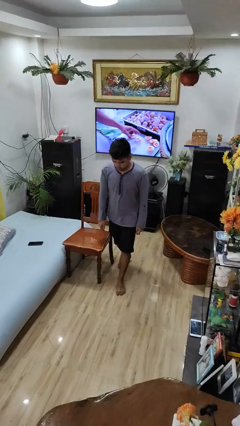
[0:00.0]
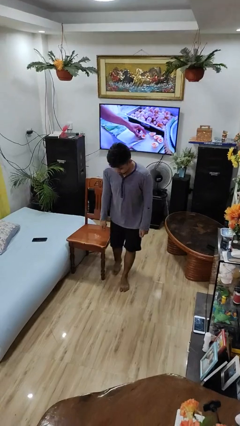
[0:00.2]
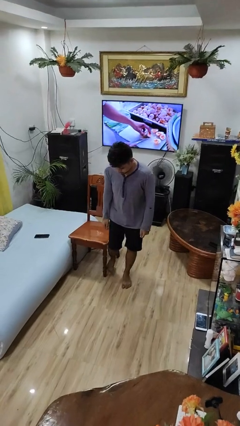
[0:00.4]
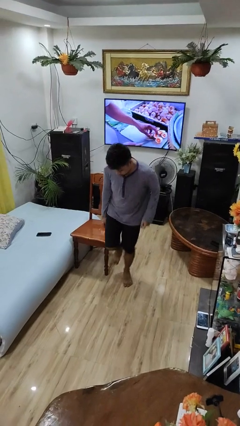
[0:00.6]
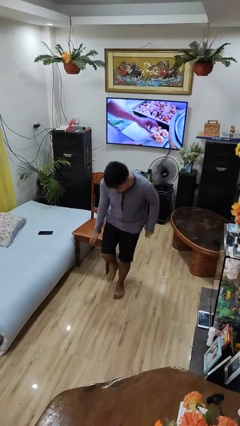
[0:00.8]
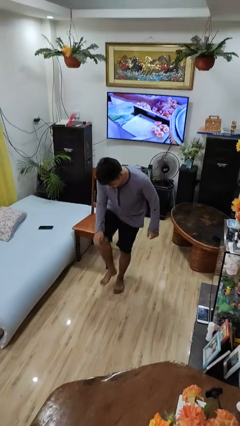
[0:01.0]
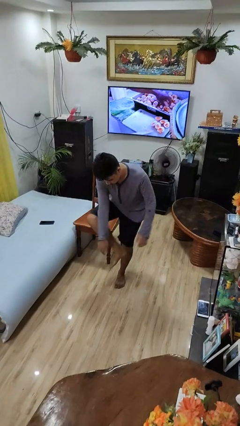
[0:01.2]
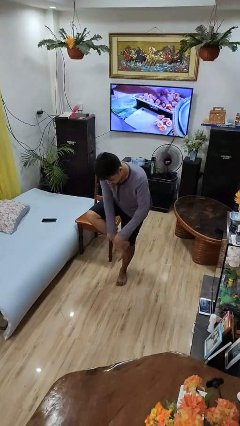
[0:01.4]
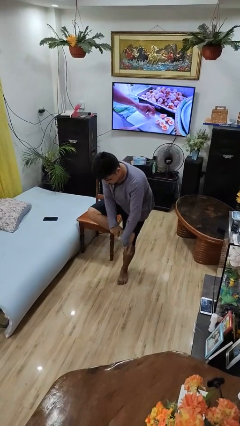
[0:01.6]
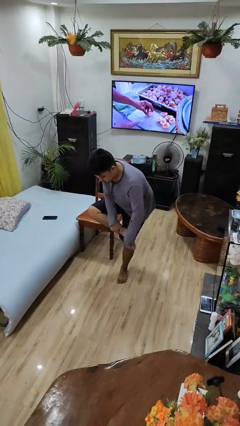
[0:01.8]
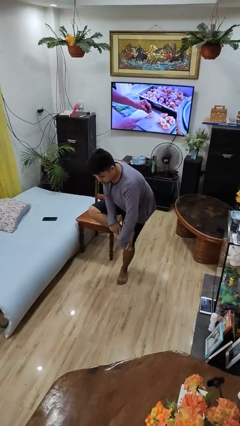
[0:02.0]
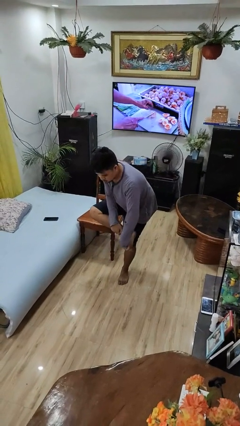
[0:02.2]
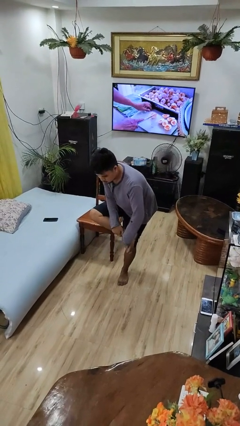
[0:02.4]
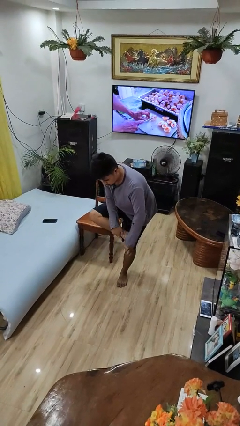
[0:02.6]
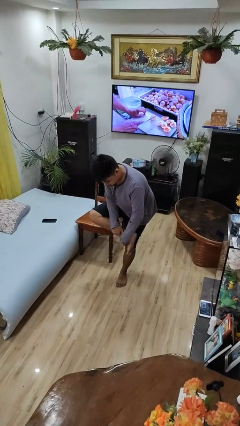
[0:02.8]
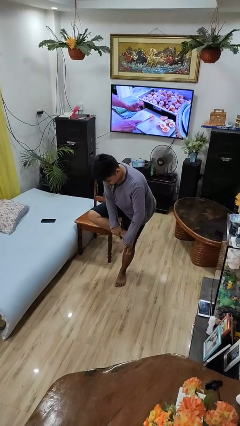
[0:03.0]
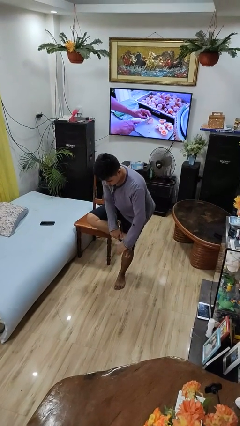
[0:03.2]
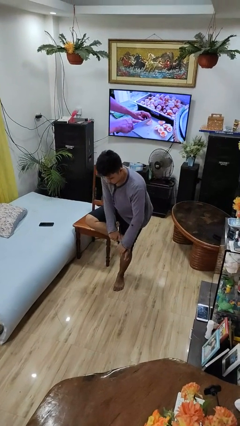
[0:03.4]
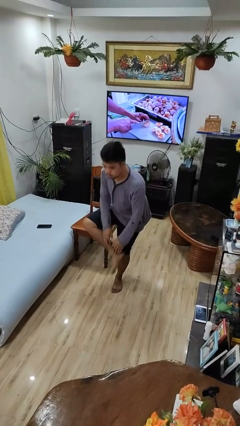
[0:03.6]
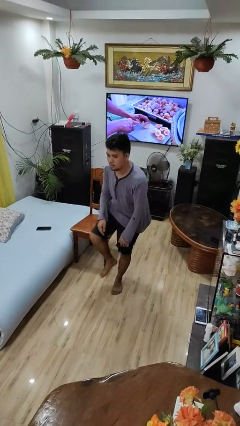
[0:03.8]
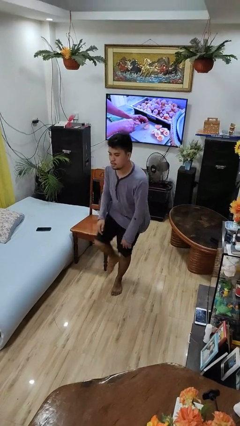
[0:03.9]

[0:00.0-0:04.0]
person stubs toe

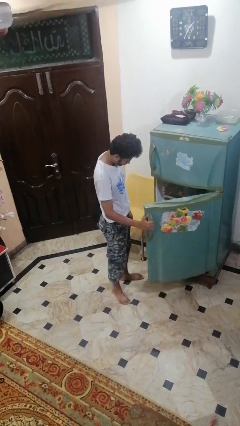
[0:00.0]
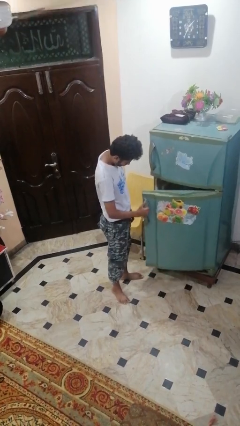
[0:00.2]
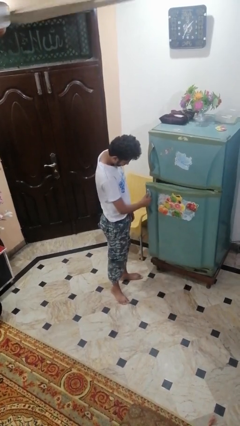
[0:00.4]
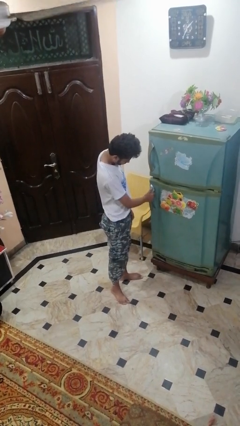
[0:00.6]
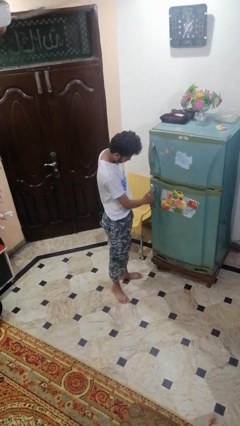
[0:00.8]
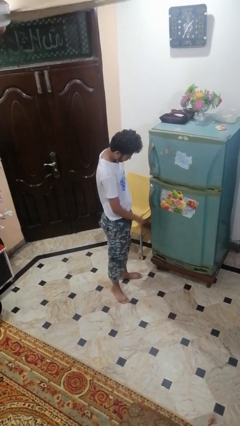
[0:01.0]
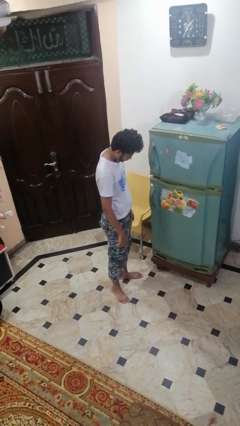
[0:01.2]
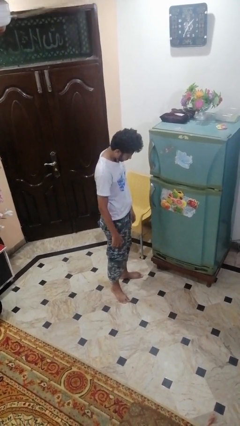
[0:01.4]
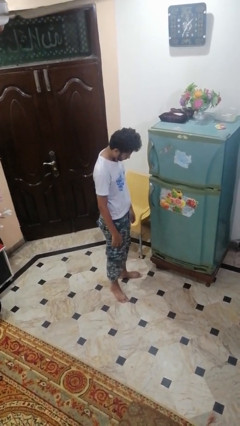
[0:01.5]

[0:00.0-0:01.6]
person closes refrigerator

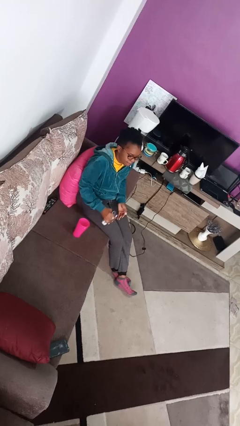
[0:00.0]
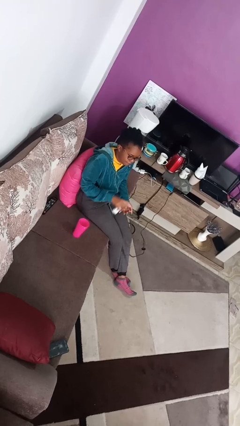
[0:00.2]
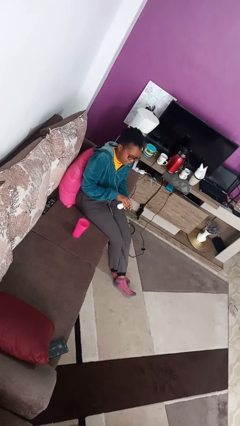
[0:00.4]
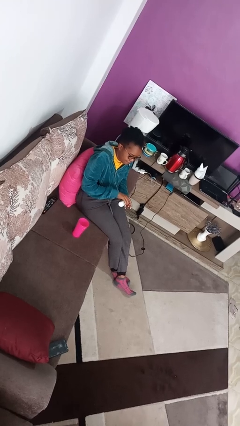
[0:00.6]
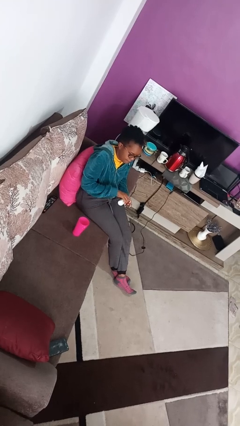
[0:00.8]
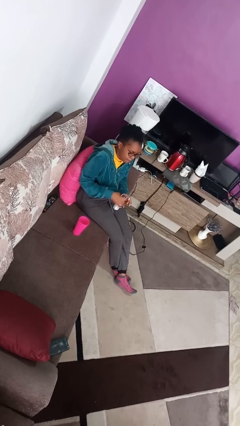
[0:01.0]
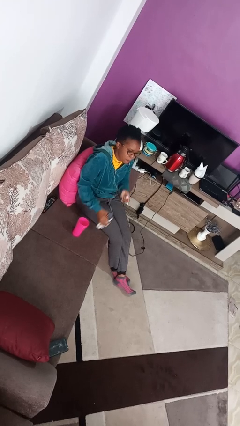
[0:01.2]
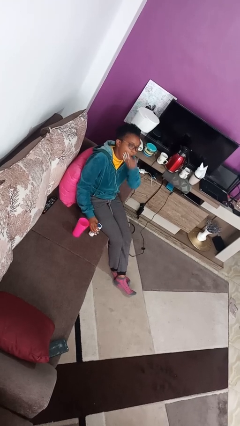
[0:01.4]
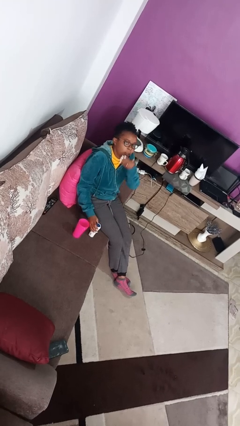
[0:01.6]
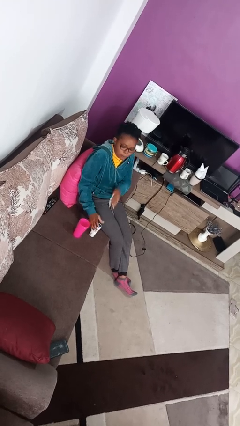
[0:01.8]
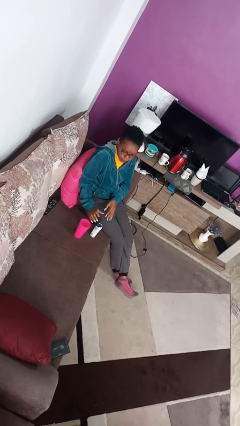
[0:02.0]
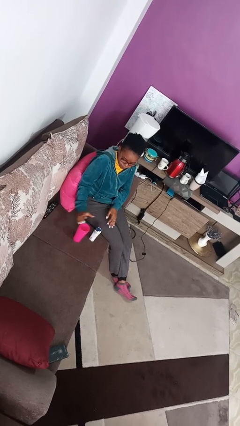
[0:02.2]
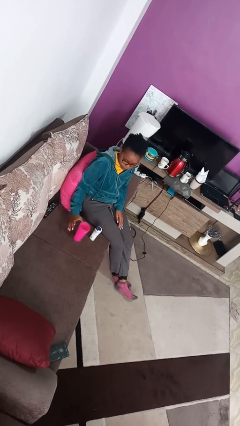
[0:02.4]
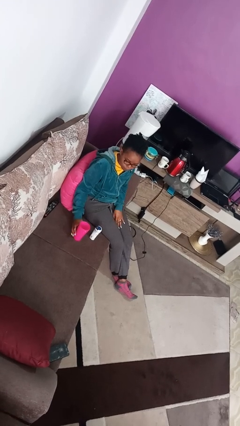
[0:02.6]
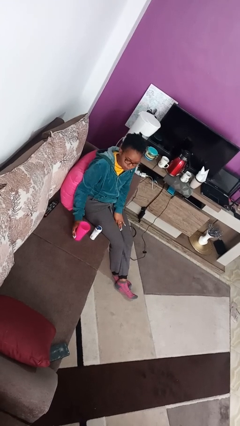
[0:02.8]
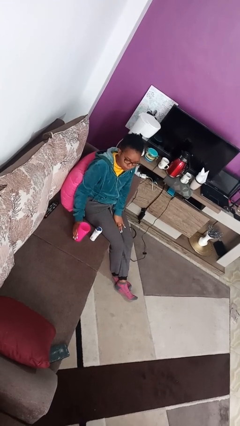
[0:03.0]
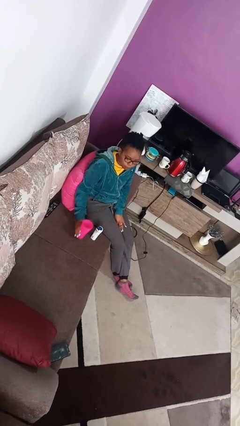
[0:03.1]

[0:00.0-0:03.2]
person takes medicine pills

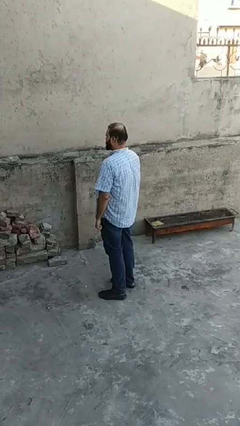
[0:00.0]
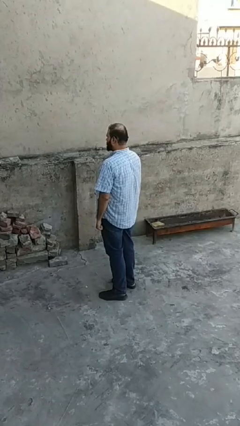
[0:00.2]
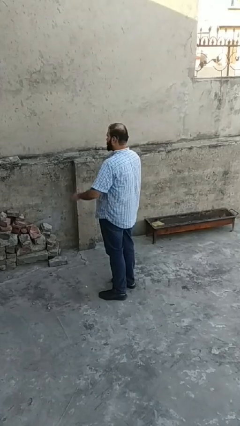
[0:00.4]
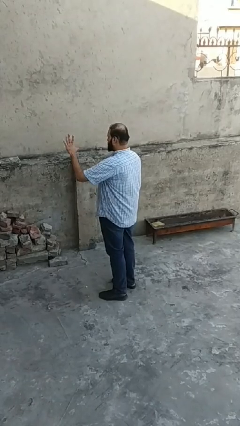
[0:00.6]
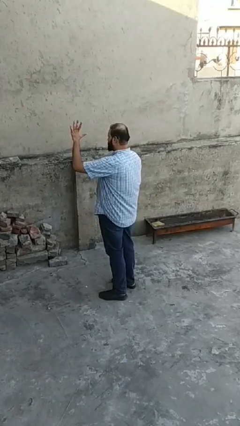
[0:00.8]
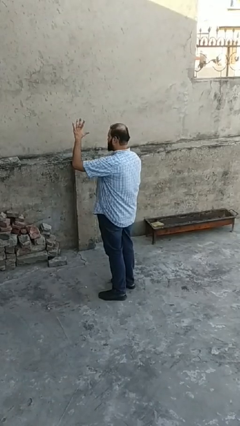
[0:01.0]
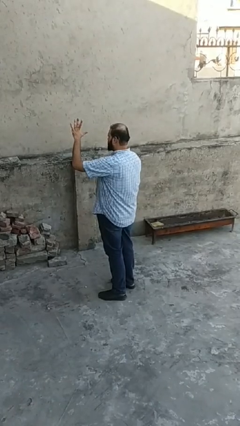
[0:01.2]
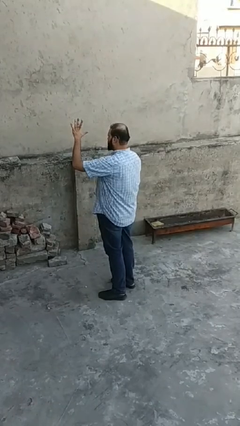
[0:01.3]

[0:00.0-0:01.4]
person gestures number five

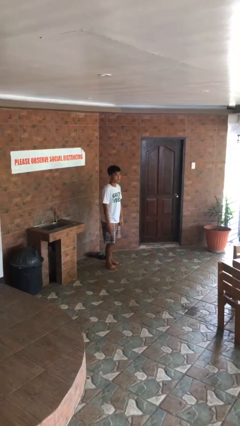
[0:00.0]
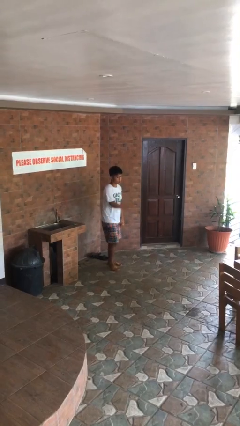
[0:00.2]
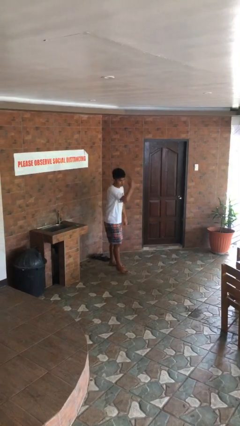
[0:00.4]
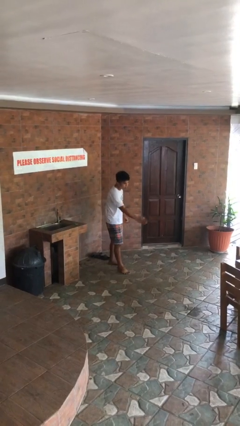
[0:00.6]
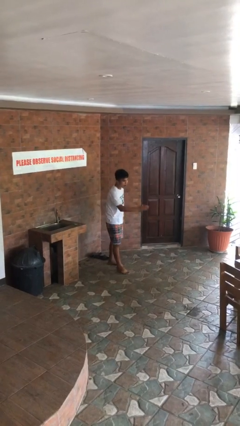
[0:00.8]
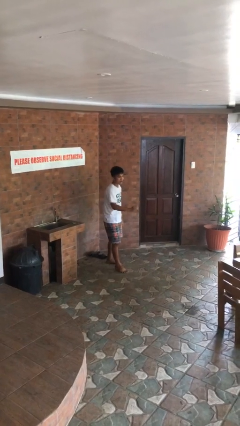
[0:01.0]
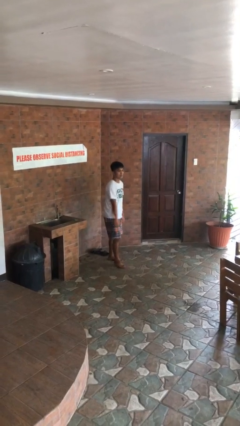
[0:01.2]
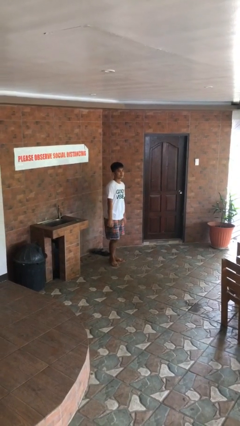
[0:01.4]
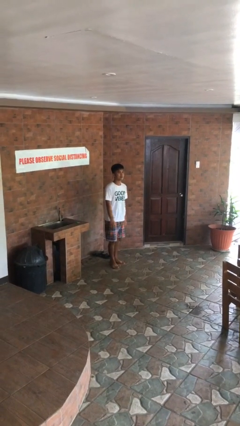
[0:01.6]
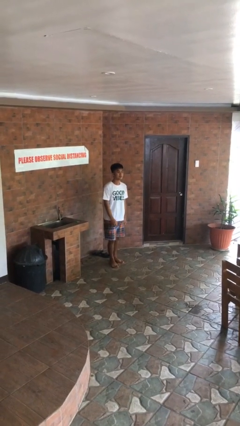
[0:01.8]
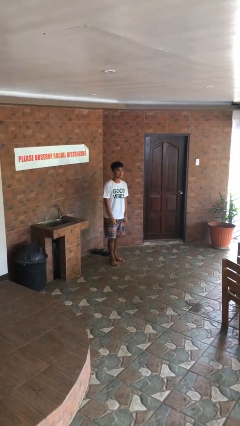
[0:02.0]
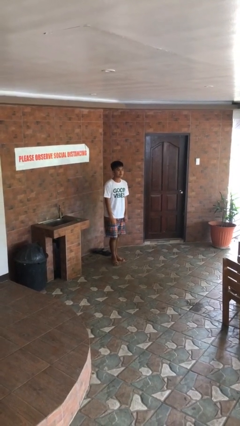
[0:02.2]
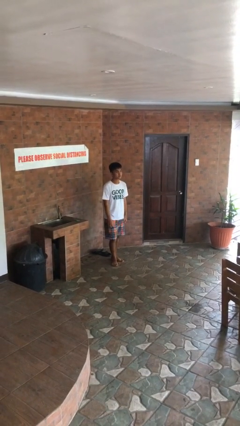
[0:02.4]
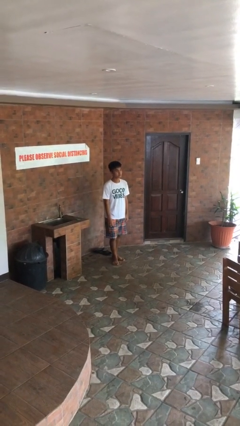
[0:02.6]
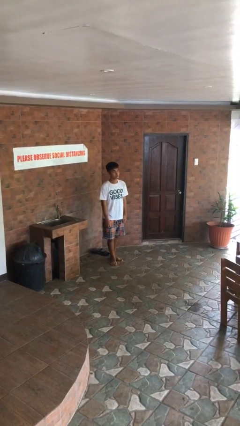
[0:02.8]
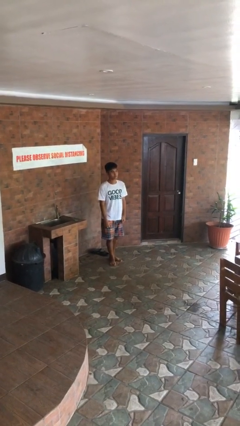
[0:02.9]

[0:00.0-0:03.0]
person karate chop

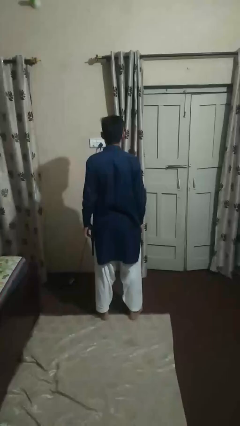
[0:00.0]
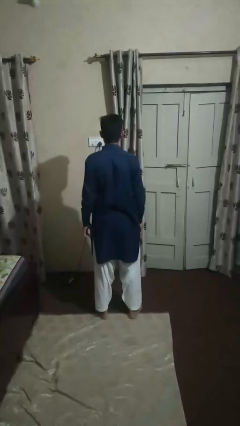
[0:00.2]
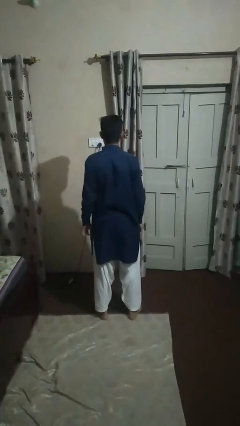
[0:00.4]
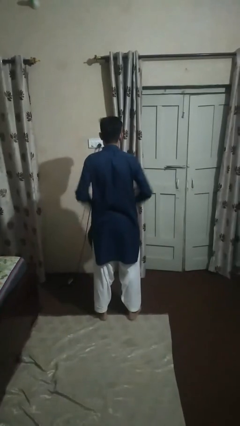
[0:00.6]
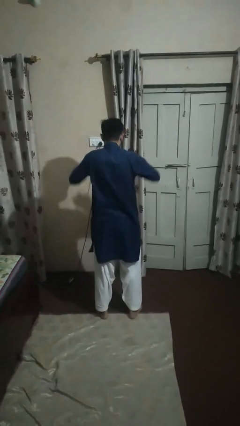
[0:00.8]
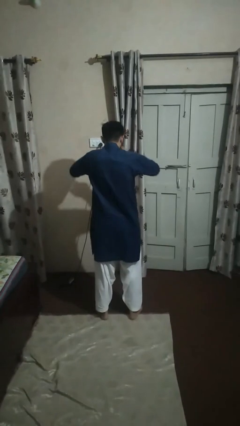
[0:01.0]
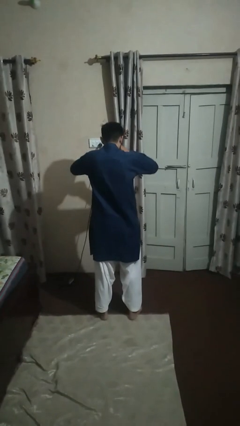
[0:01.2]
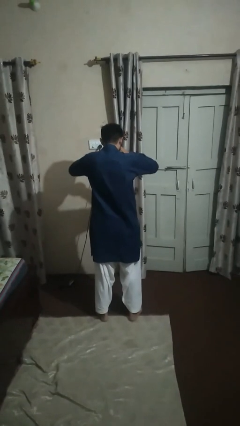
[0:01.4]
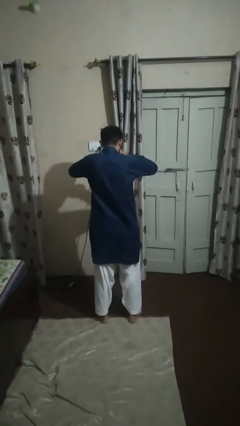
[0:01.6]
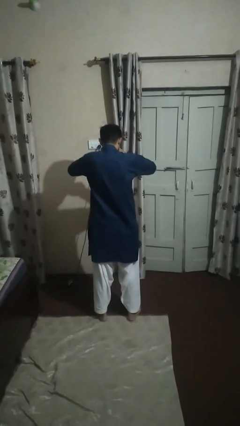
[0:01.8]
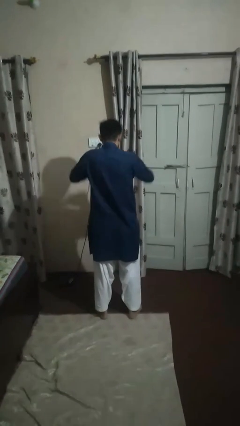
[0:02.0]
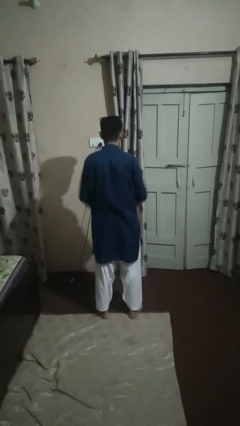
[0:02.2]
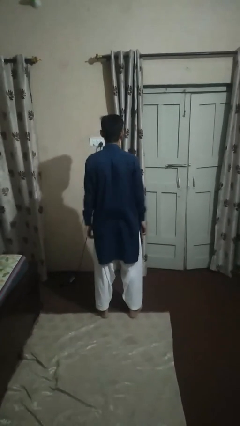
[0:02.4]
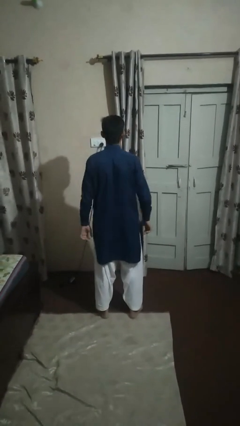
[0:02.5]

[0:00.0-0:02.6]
person rubs eyes

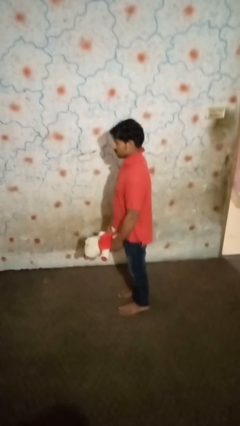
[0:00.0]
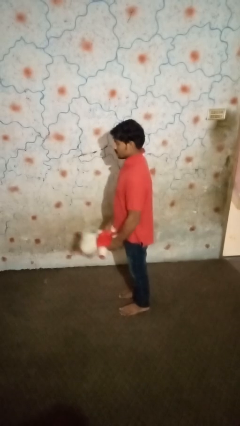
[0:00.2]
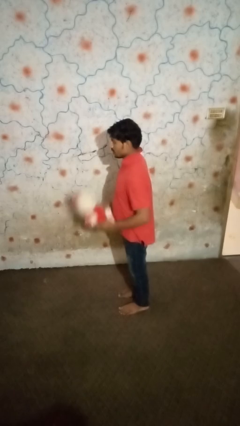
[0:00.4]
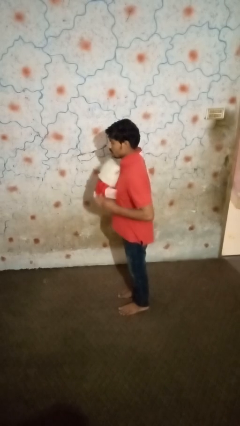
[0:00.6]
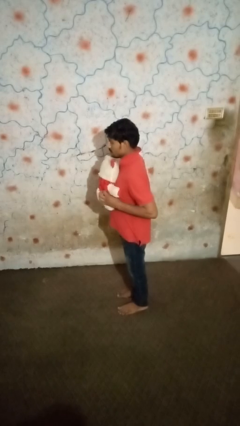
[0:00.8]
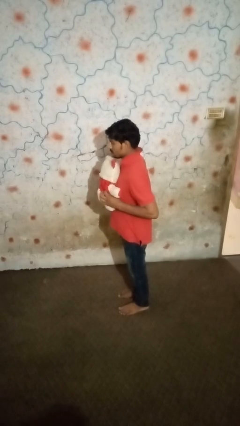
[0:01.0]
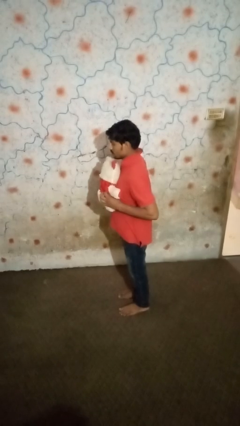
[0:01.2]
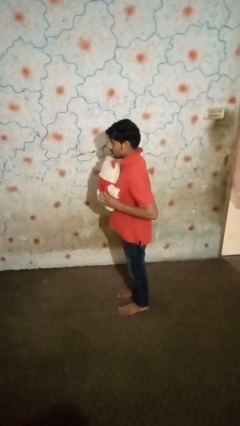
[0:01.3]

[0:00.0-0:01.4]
person hugs stuffed animal
